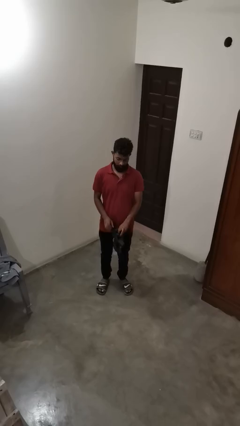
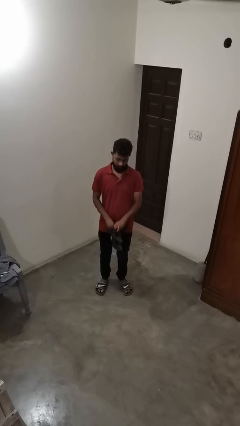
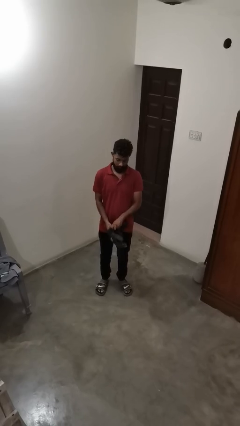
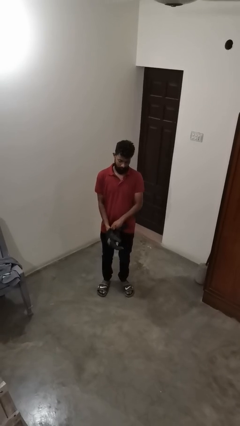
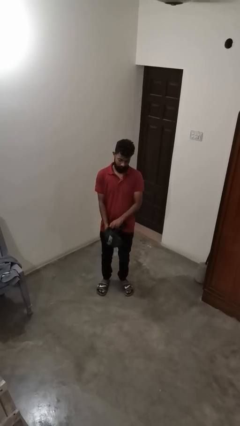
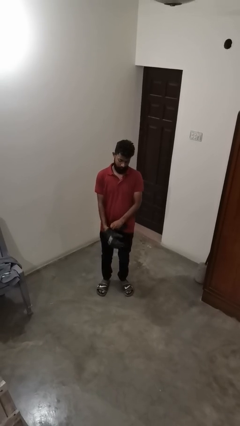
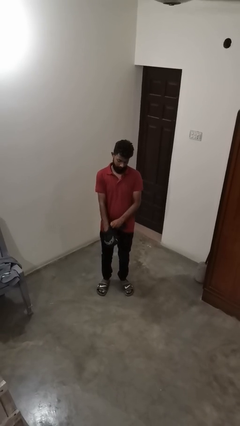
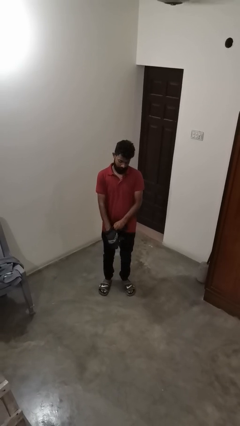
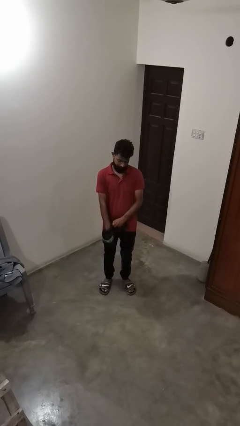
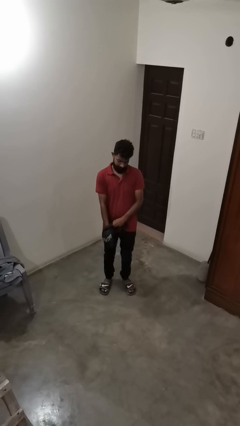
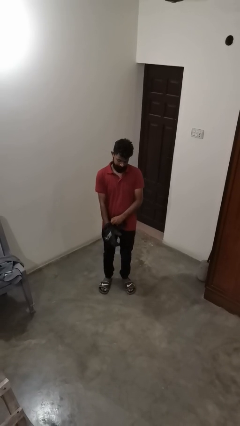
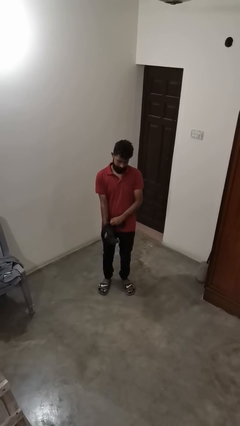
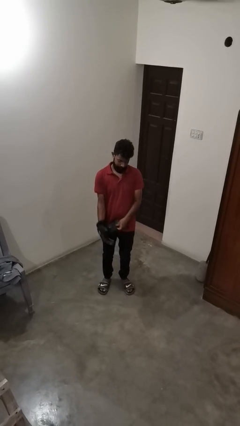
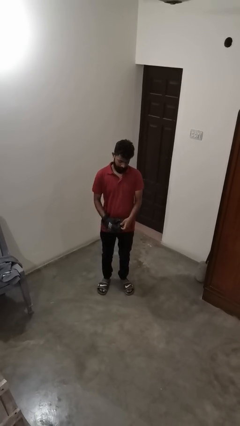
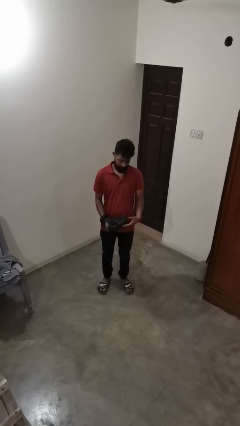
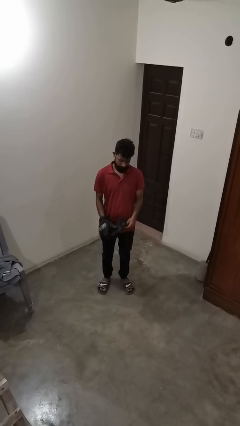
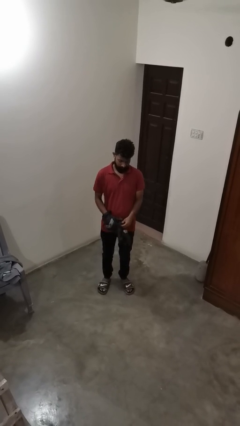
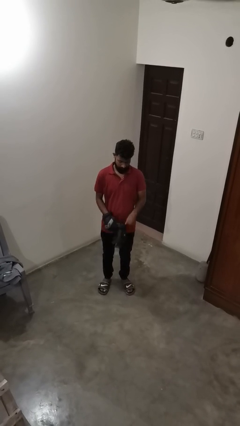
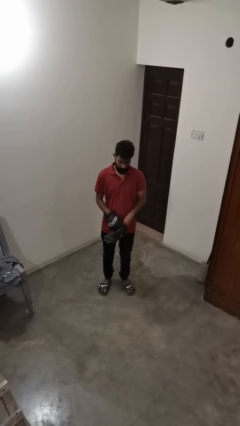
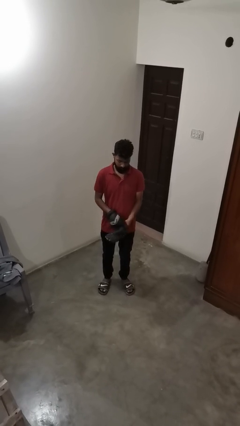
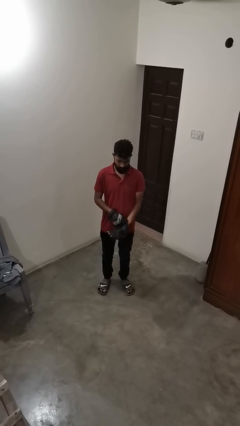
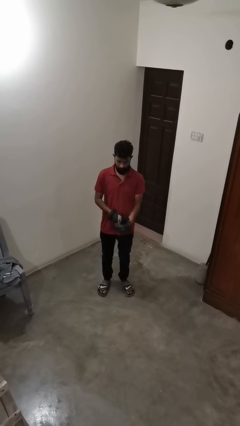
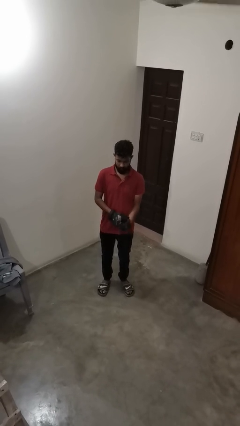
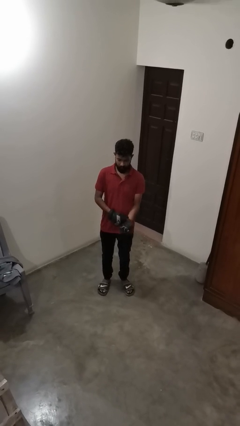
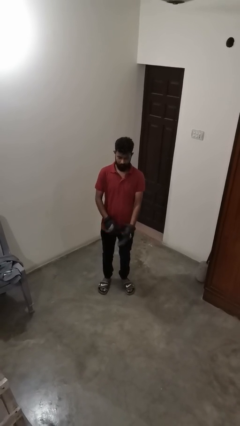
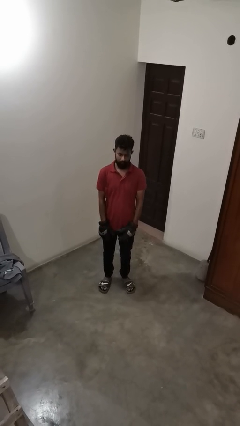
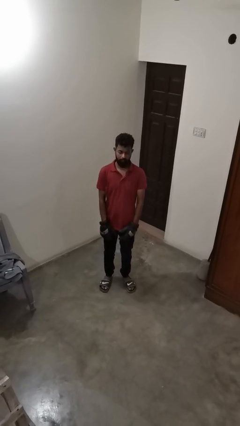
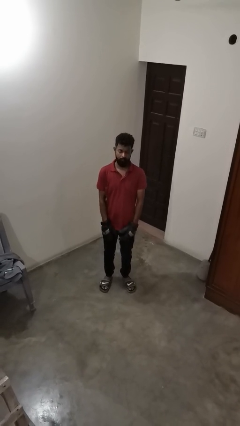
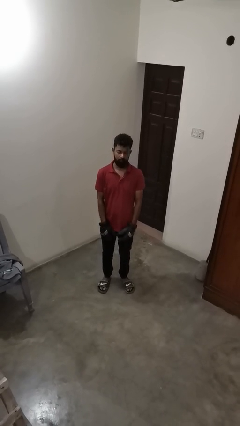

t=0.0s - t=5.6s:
person puts on gloves

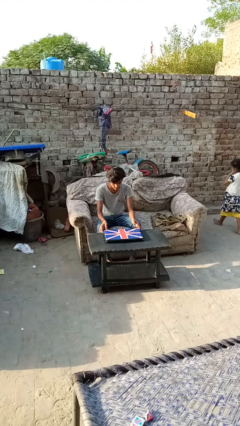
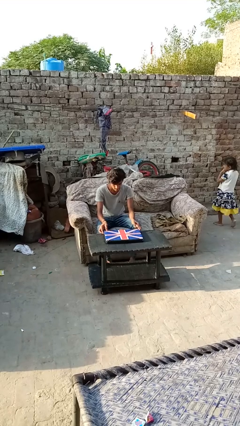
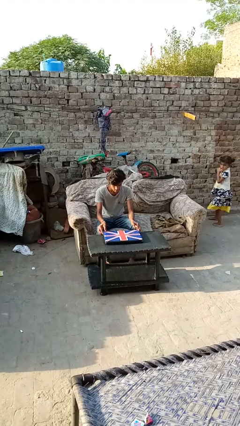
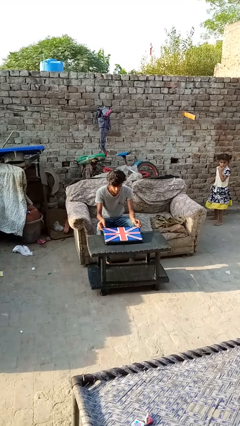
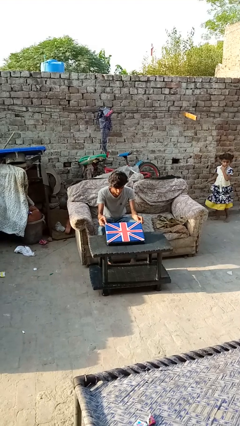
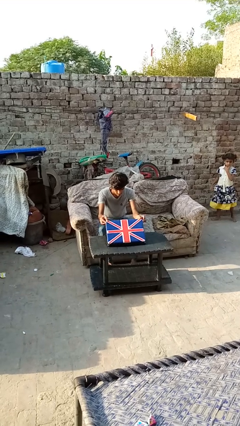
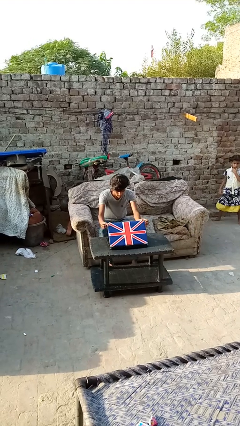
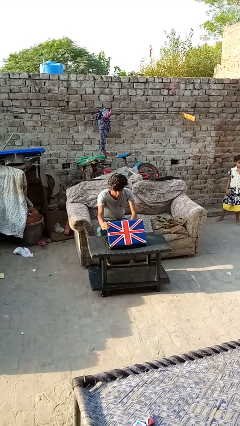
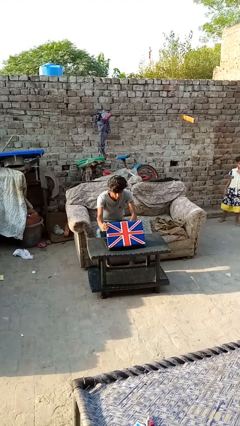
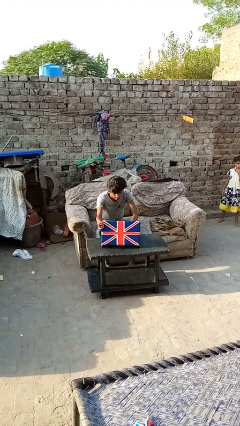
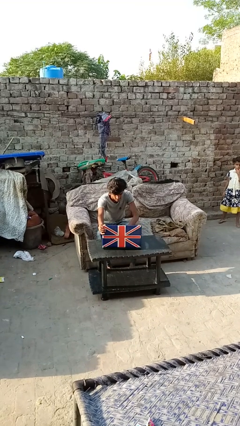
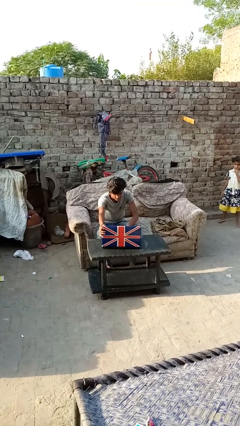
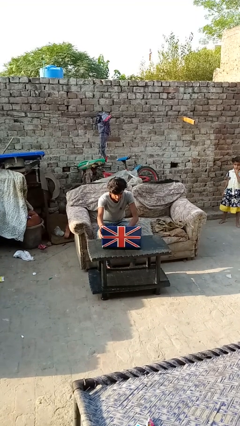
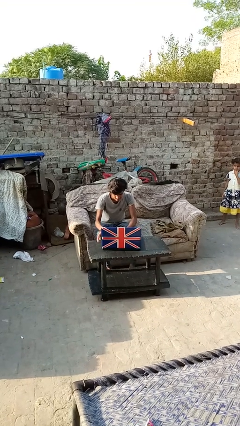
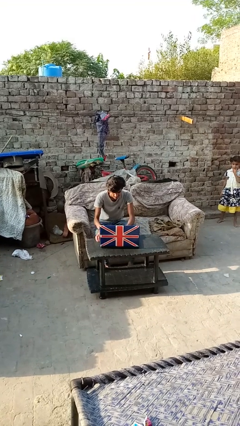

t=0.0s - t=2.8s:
person opens laptop

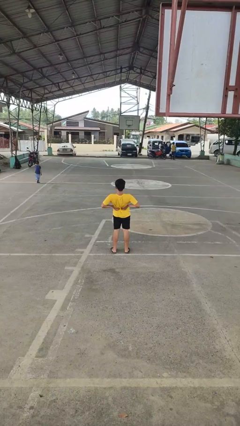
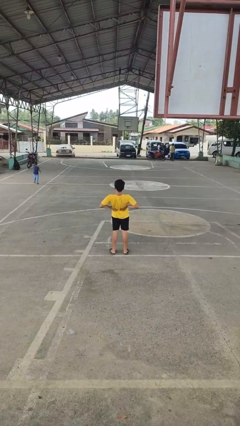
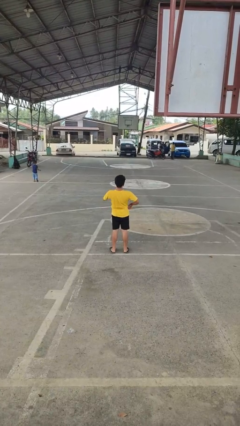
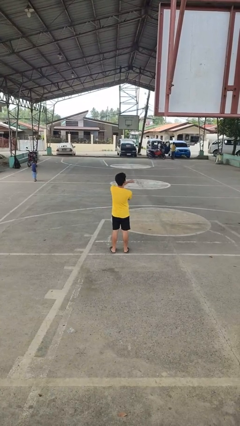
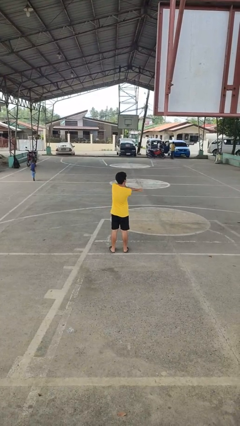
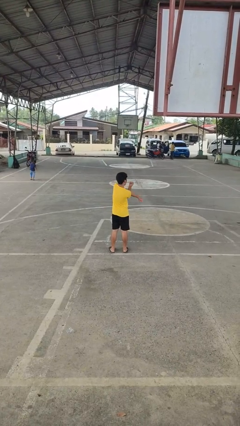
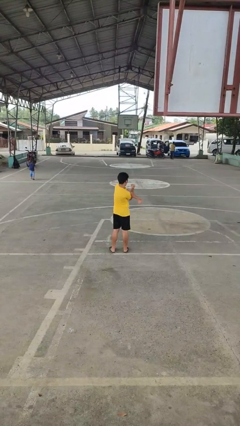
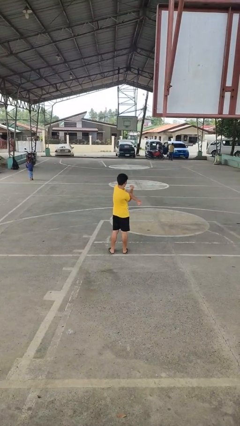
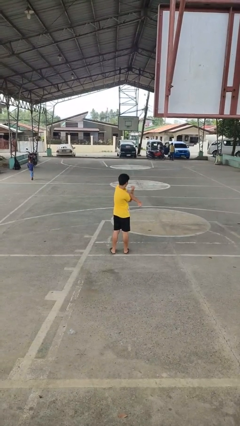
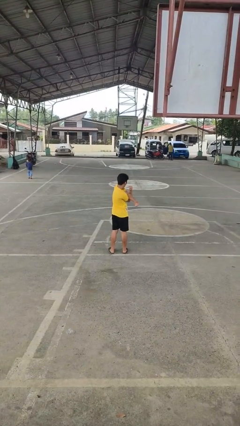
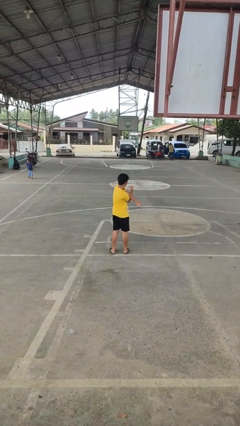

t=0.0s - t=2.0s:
person stretches arms to side

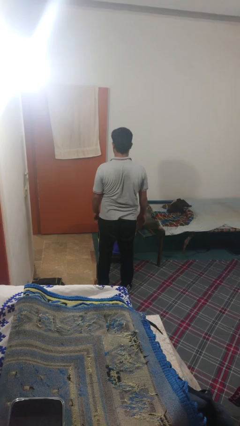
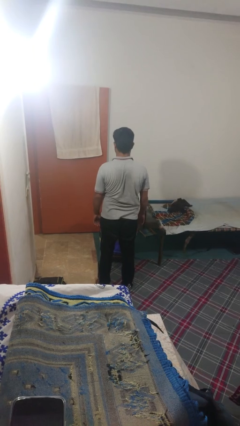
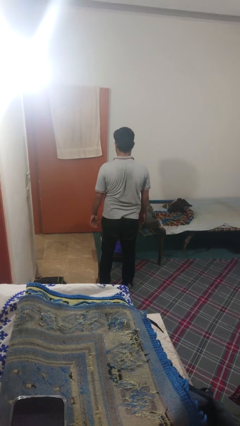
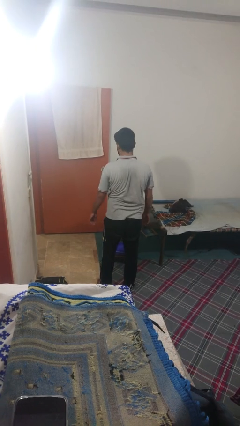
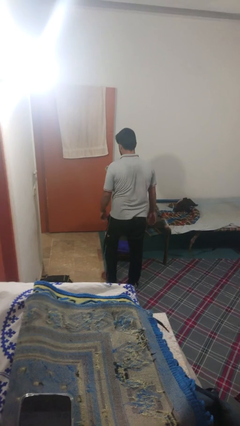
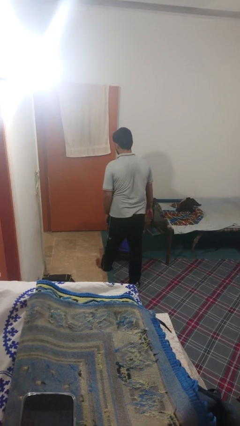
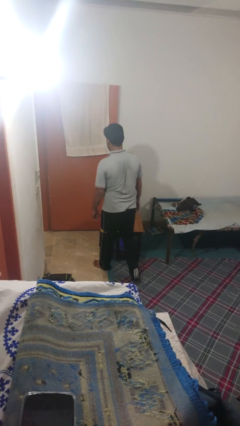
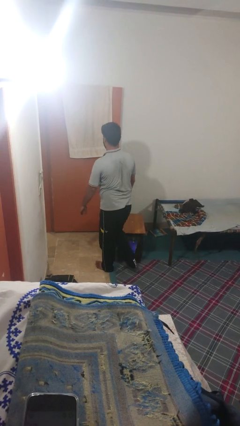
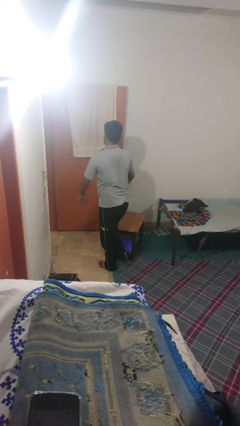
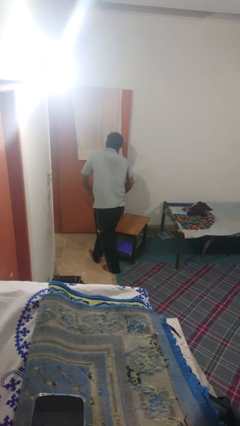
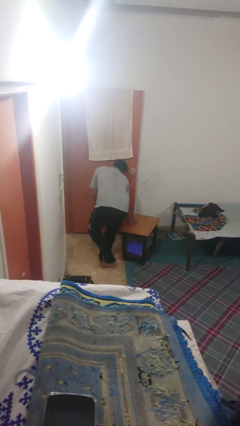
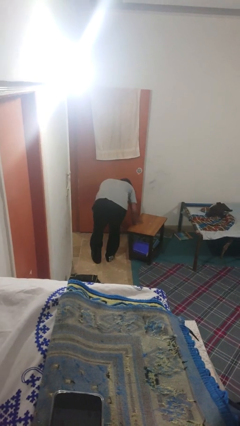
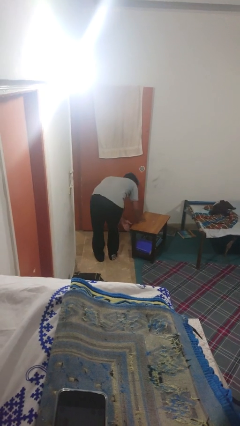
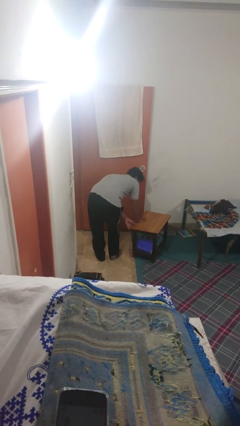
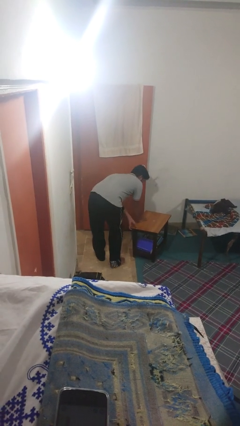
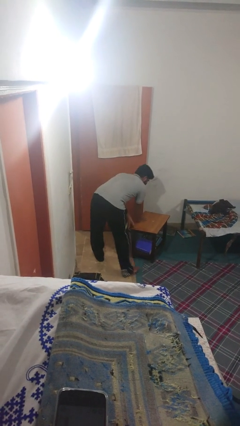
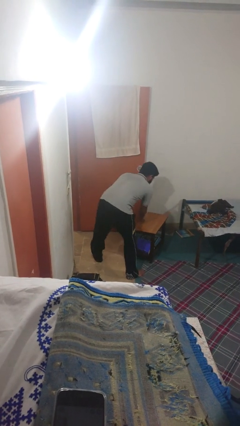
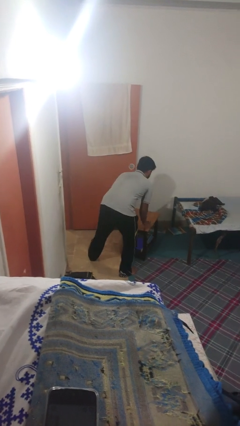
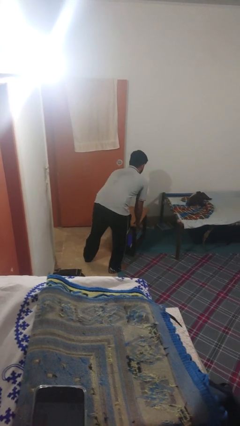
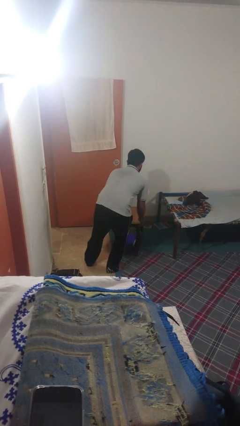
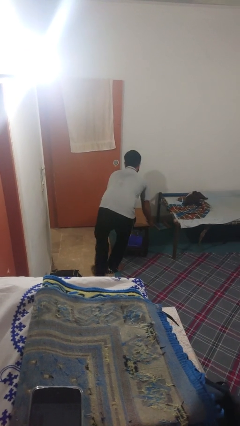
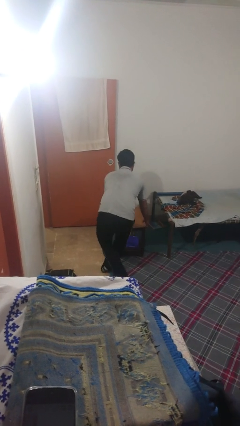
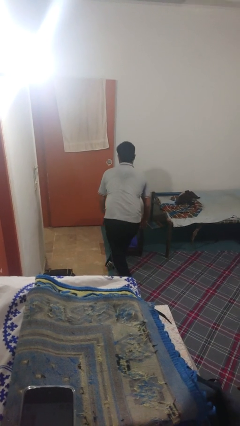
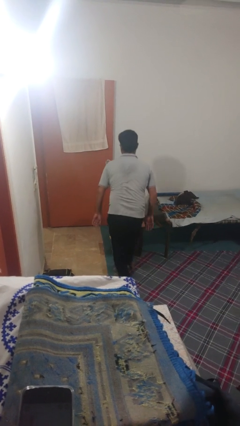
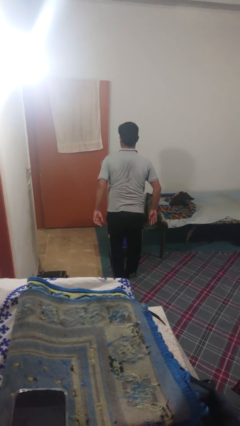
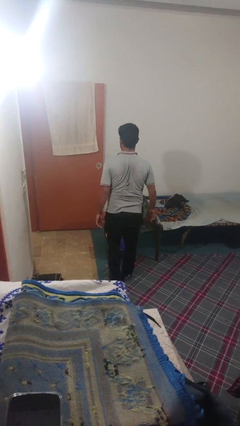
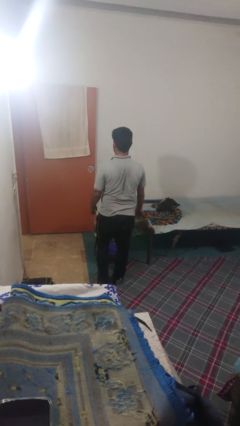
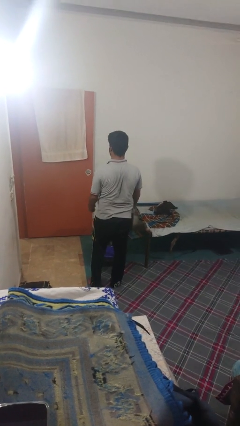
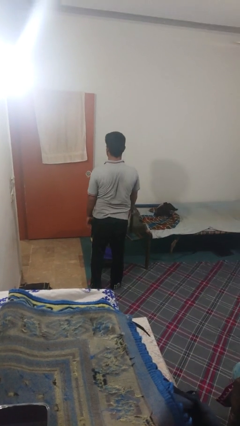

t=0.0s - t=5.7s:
person bumps into table

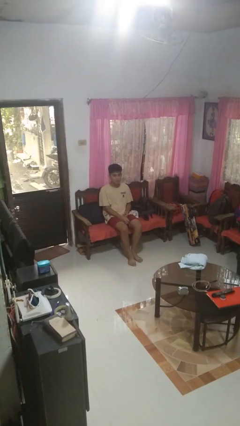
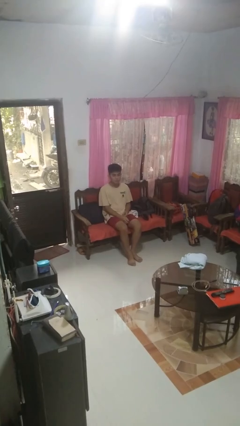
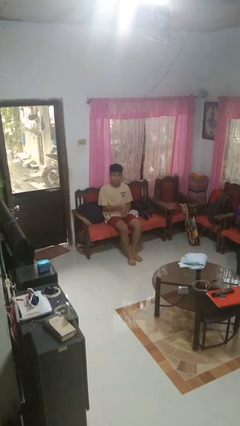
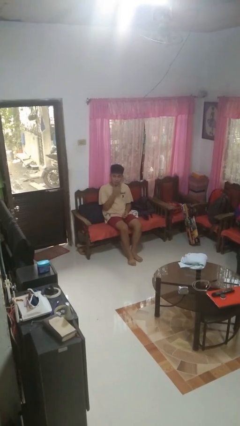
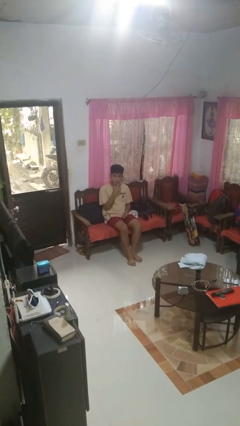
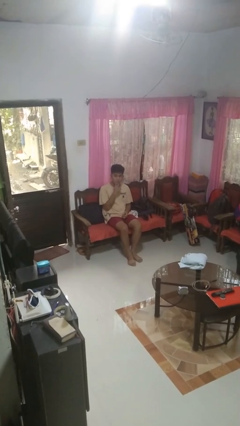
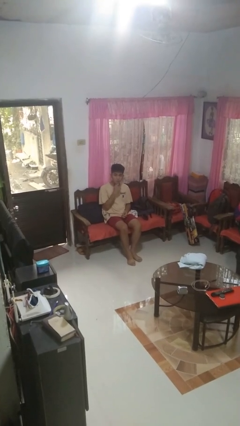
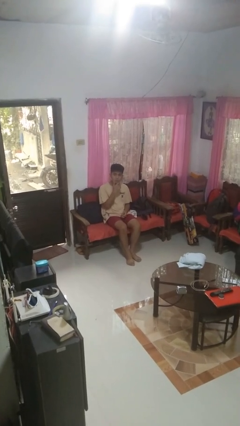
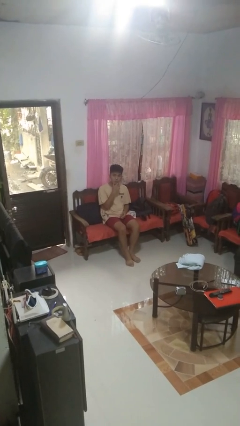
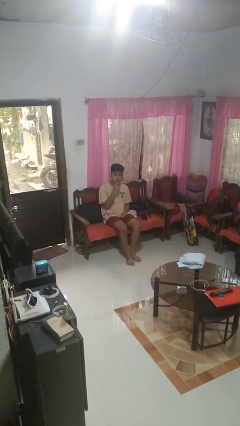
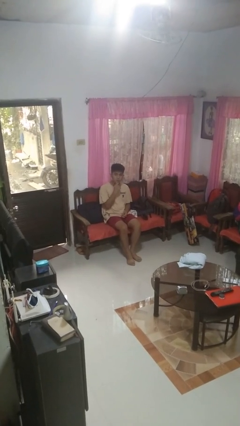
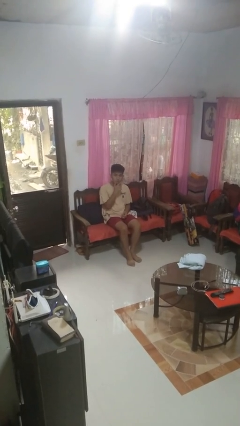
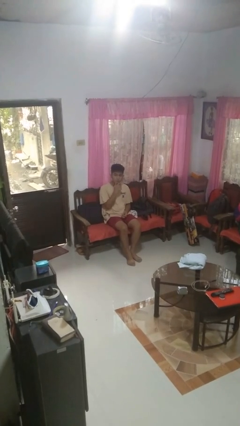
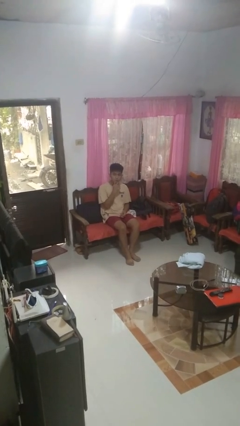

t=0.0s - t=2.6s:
person strokes chin
